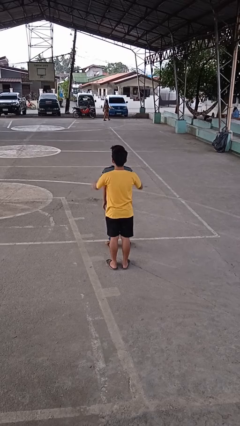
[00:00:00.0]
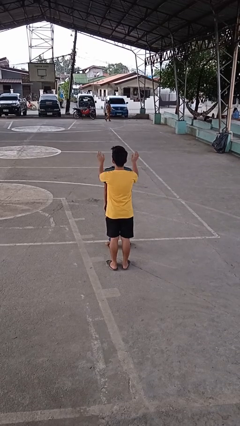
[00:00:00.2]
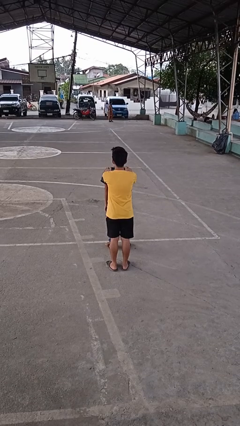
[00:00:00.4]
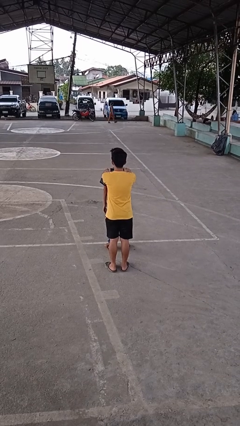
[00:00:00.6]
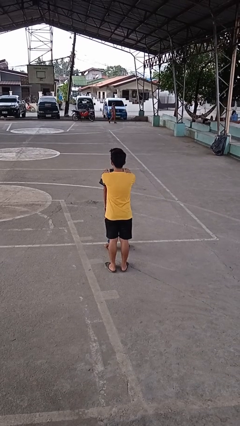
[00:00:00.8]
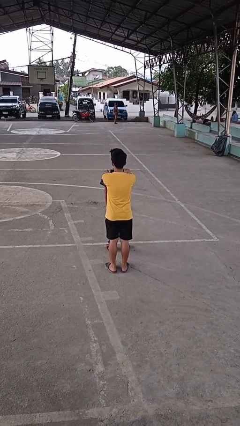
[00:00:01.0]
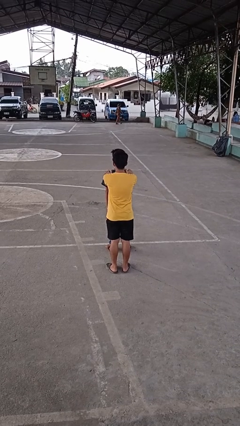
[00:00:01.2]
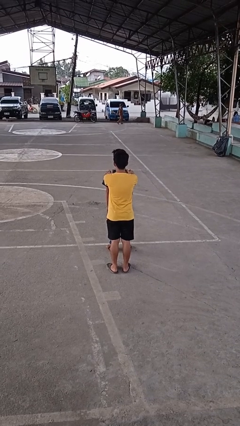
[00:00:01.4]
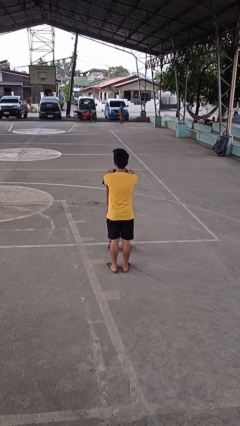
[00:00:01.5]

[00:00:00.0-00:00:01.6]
person grabs person by shoulder

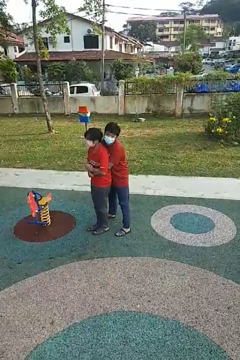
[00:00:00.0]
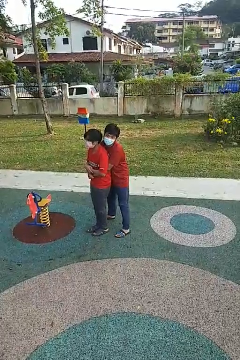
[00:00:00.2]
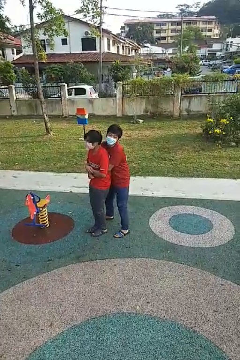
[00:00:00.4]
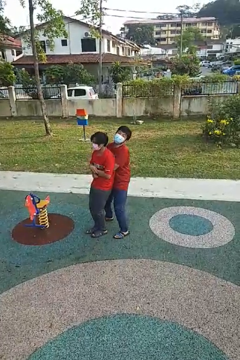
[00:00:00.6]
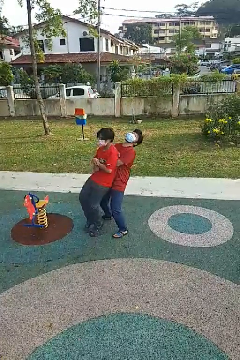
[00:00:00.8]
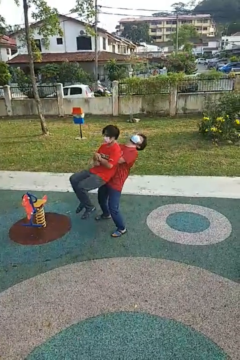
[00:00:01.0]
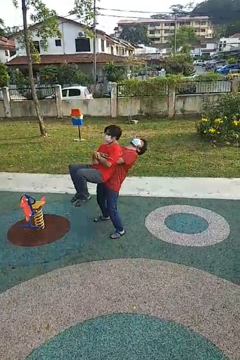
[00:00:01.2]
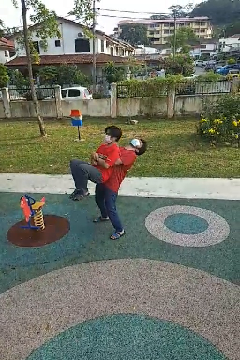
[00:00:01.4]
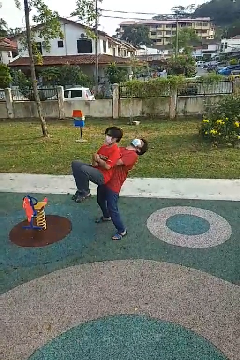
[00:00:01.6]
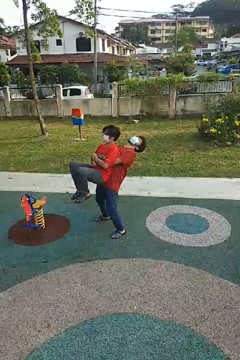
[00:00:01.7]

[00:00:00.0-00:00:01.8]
person picks up person

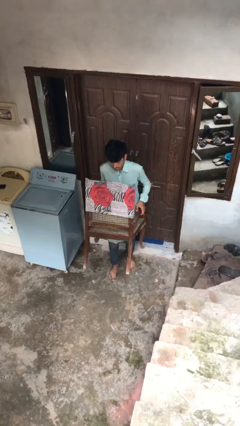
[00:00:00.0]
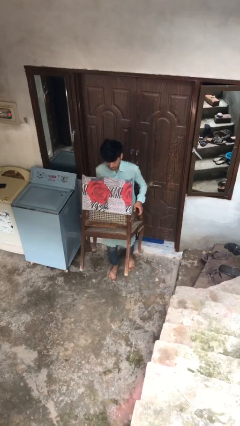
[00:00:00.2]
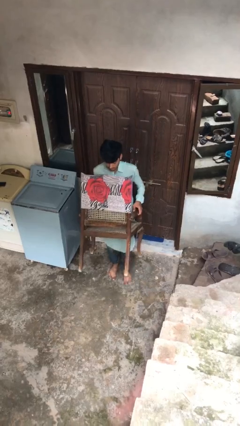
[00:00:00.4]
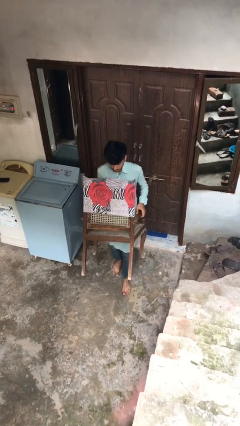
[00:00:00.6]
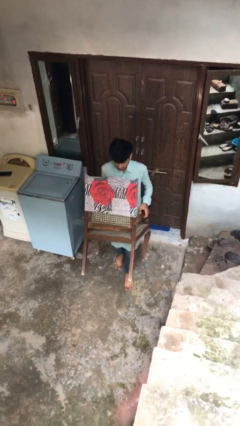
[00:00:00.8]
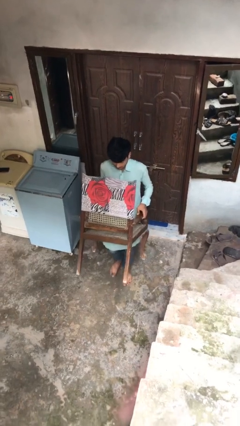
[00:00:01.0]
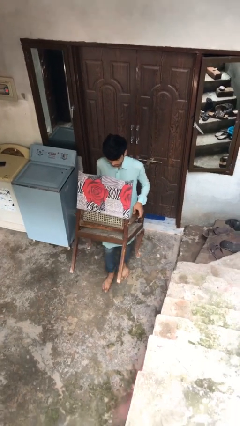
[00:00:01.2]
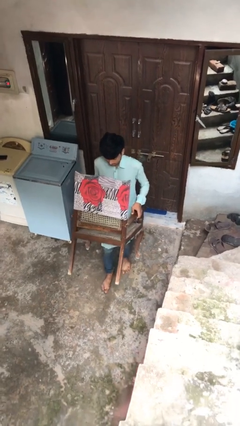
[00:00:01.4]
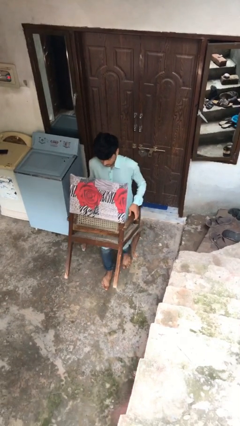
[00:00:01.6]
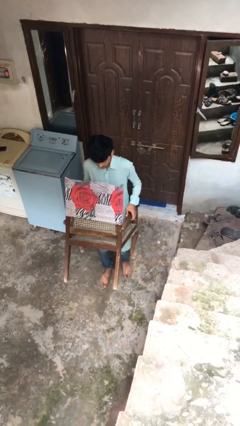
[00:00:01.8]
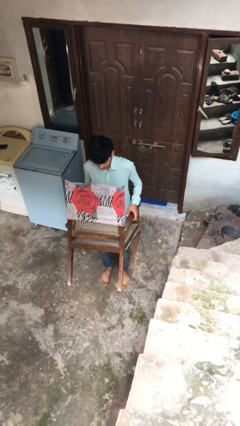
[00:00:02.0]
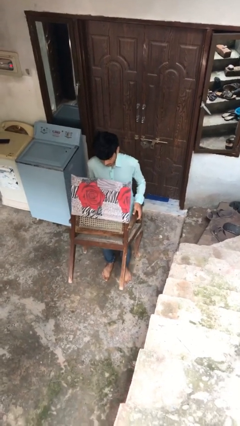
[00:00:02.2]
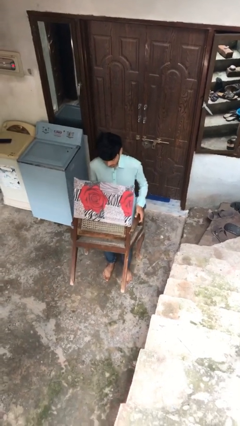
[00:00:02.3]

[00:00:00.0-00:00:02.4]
person carries heavy object

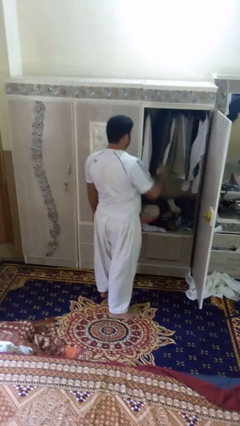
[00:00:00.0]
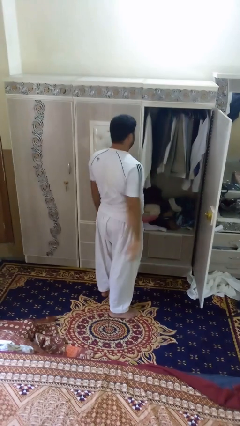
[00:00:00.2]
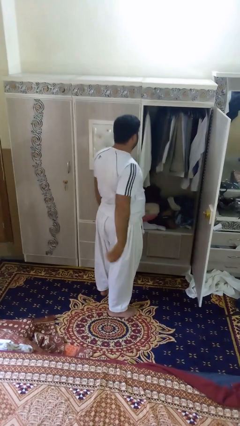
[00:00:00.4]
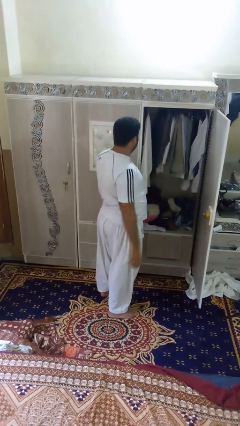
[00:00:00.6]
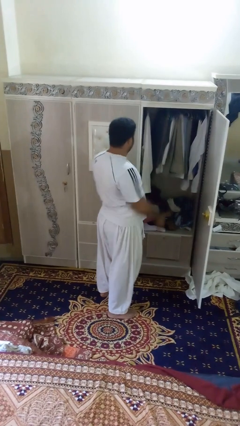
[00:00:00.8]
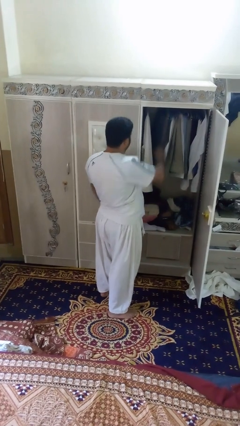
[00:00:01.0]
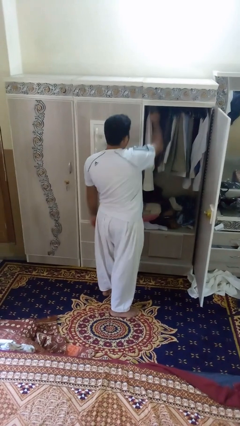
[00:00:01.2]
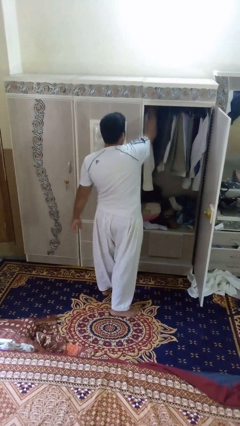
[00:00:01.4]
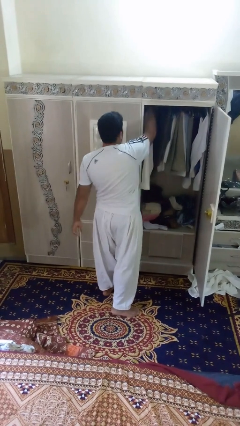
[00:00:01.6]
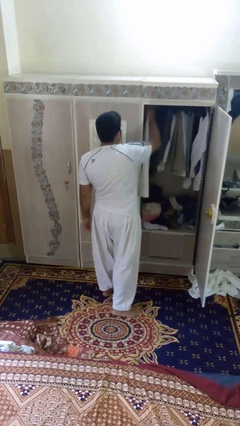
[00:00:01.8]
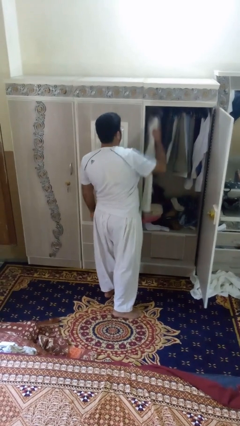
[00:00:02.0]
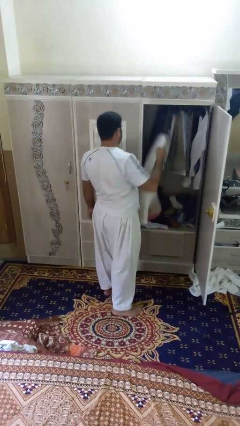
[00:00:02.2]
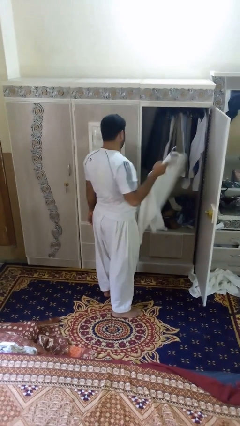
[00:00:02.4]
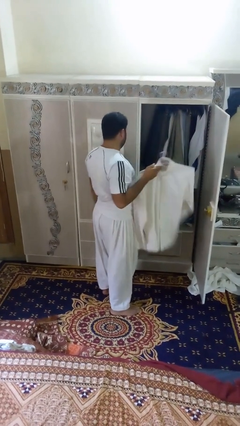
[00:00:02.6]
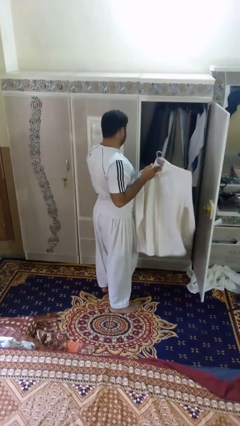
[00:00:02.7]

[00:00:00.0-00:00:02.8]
person takes clothes from closet

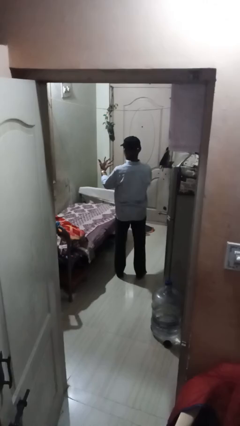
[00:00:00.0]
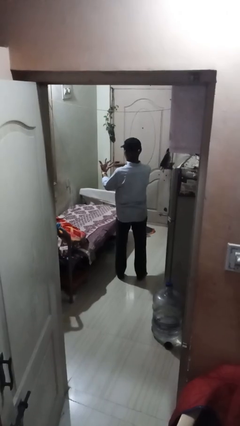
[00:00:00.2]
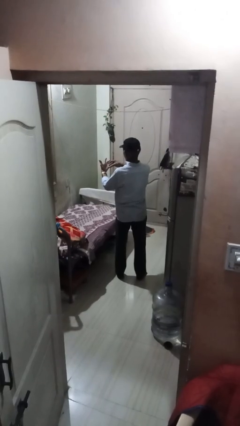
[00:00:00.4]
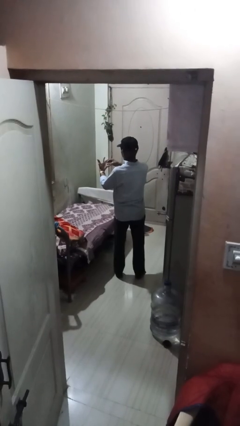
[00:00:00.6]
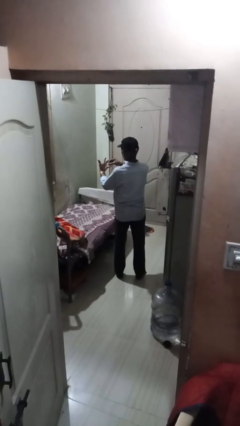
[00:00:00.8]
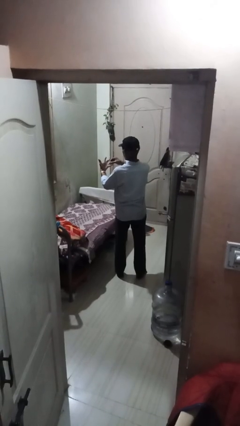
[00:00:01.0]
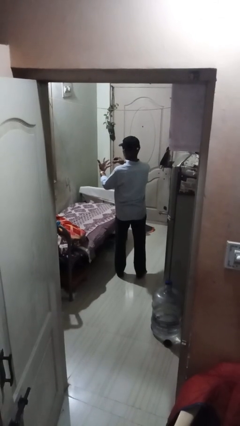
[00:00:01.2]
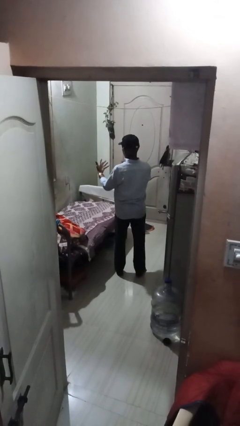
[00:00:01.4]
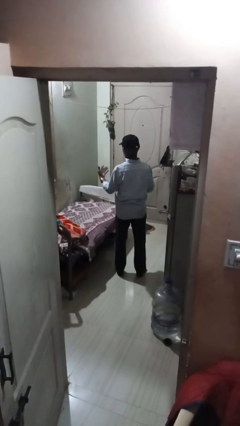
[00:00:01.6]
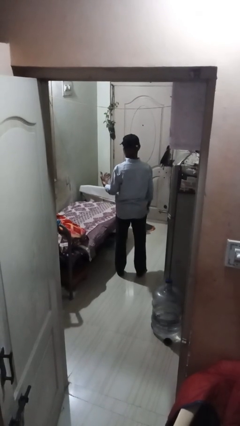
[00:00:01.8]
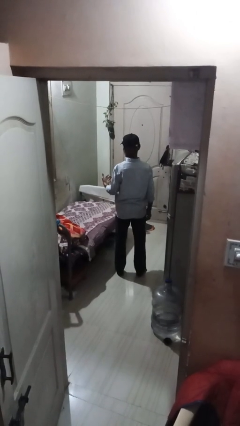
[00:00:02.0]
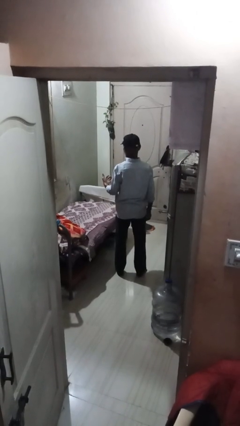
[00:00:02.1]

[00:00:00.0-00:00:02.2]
person takes off ring

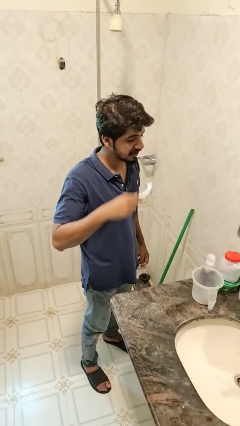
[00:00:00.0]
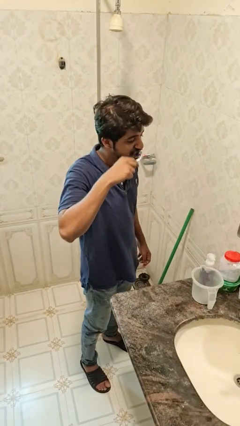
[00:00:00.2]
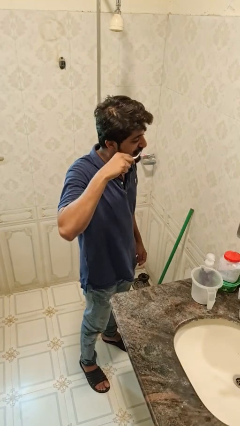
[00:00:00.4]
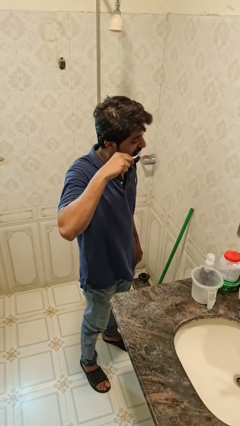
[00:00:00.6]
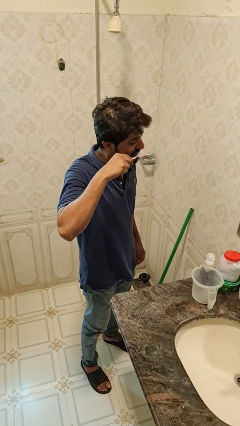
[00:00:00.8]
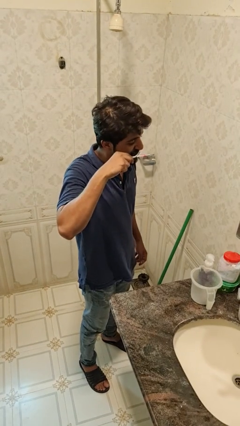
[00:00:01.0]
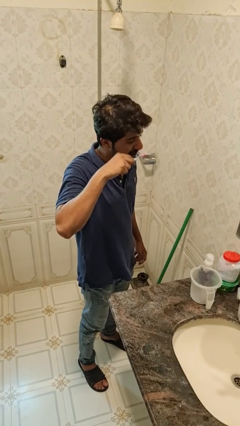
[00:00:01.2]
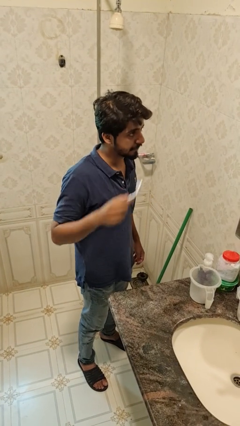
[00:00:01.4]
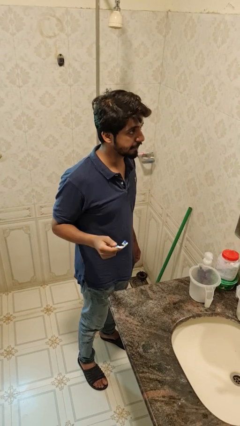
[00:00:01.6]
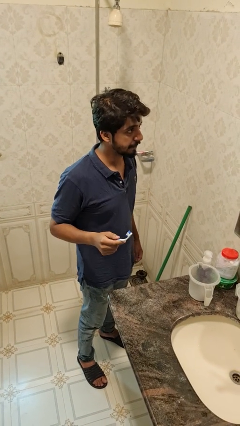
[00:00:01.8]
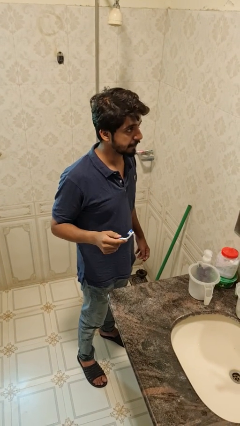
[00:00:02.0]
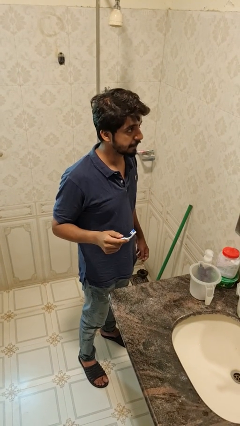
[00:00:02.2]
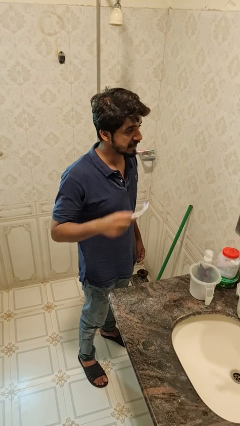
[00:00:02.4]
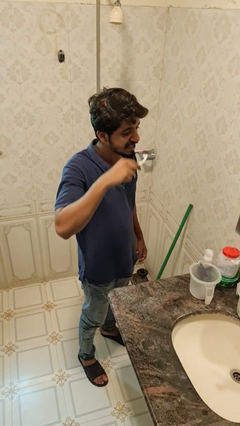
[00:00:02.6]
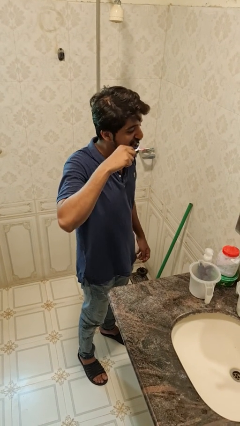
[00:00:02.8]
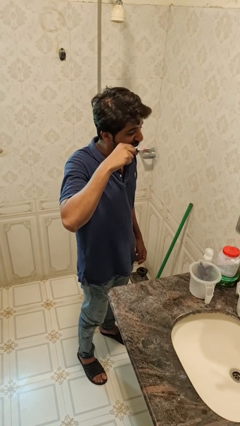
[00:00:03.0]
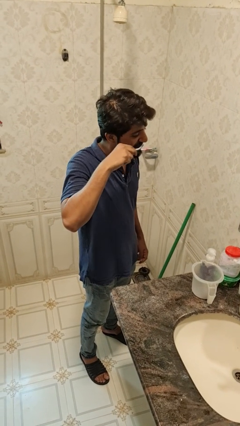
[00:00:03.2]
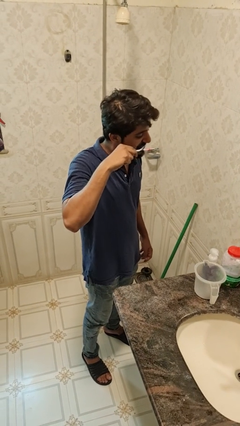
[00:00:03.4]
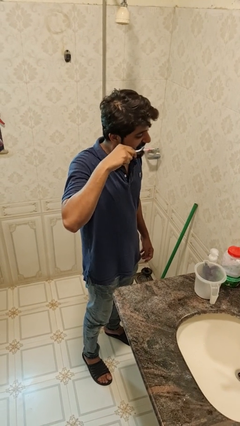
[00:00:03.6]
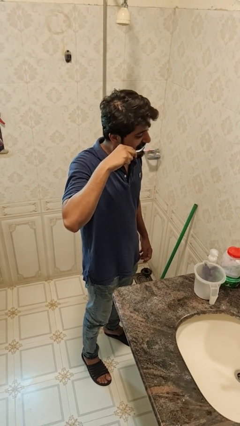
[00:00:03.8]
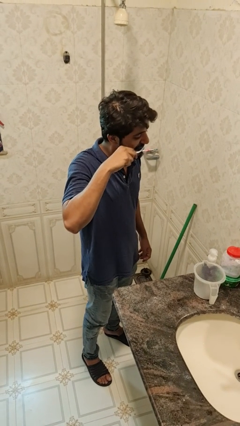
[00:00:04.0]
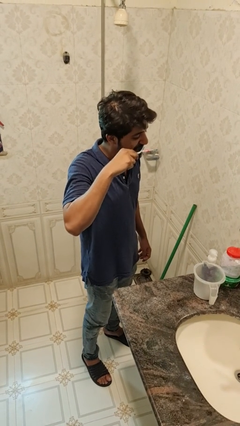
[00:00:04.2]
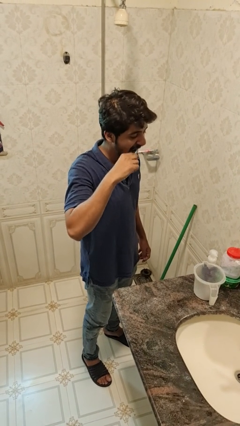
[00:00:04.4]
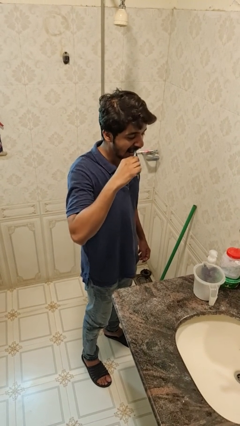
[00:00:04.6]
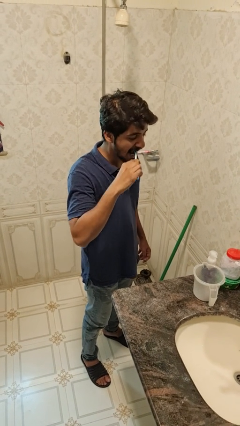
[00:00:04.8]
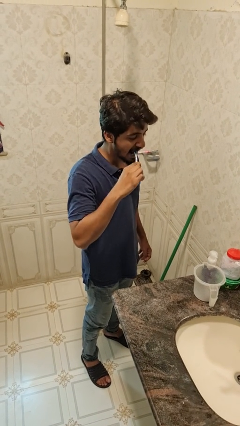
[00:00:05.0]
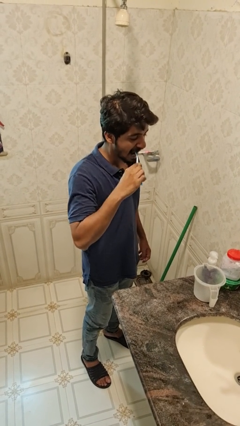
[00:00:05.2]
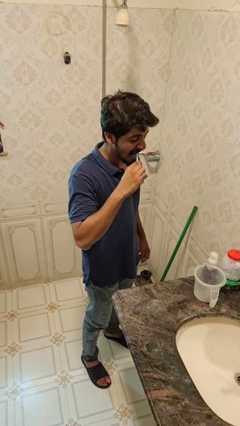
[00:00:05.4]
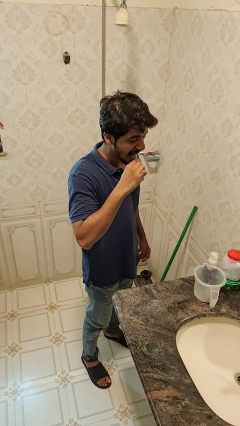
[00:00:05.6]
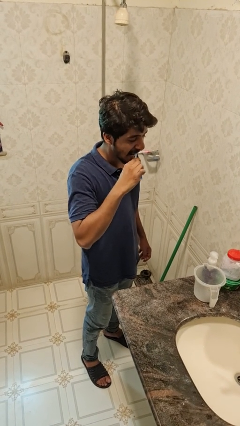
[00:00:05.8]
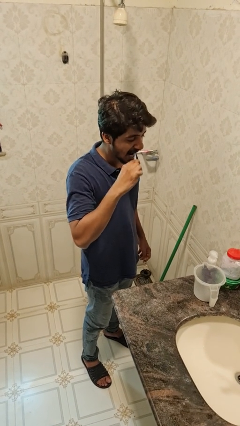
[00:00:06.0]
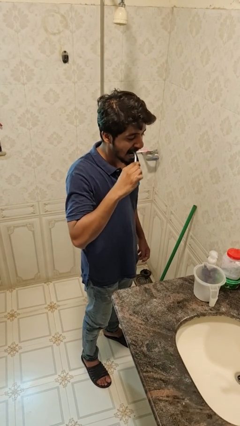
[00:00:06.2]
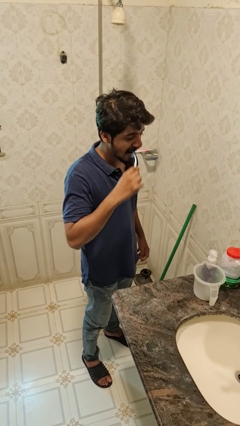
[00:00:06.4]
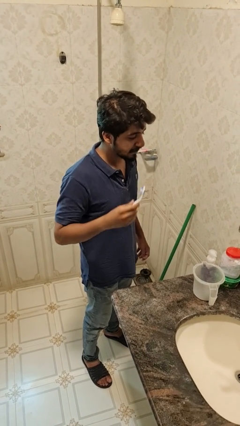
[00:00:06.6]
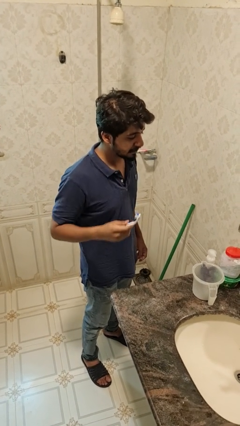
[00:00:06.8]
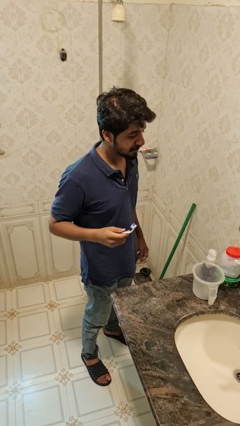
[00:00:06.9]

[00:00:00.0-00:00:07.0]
person brushes teeth
